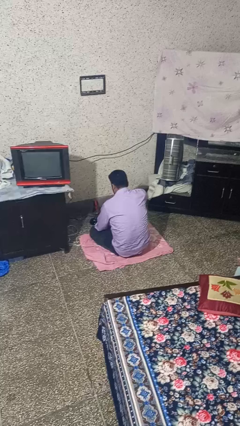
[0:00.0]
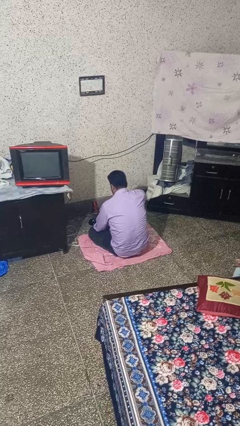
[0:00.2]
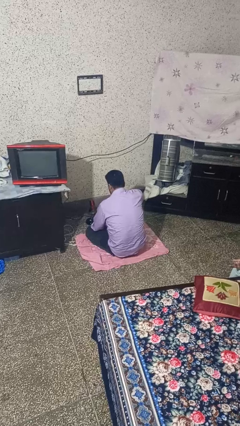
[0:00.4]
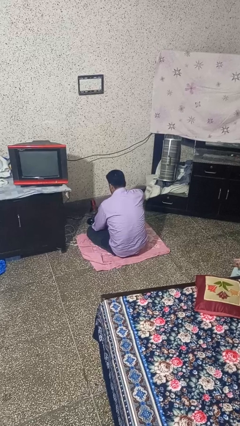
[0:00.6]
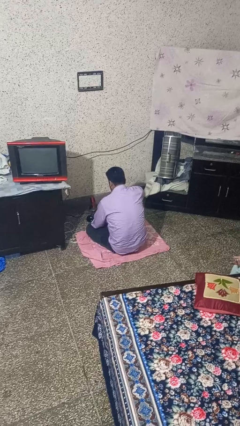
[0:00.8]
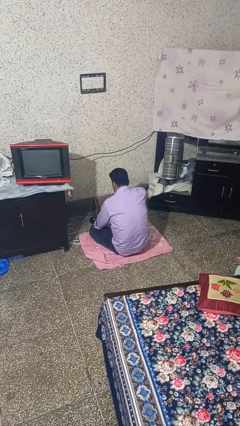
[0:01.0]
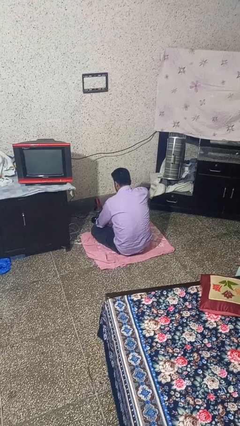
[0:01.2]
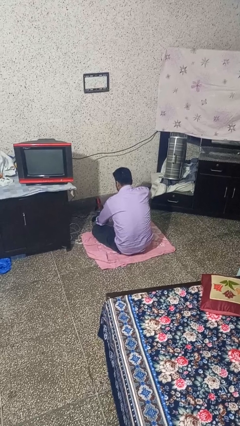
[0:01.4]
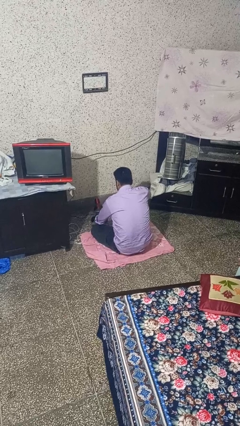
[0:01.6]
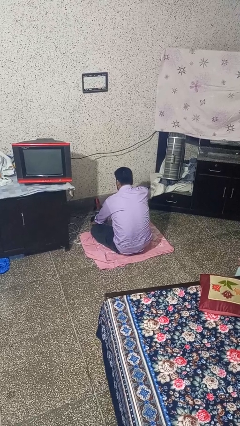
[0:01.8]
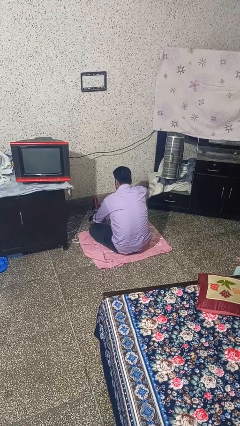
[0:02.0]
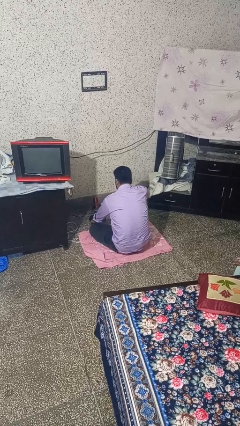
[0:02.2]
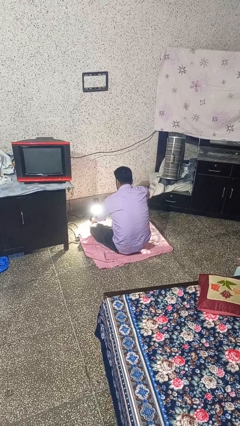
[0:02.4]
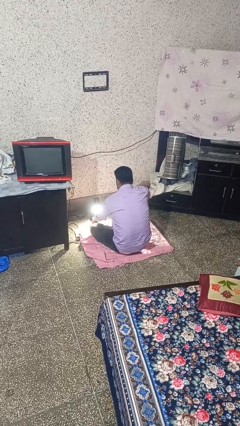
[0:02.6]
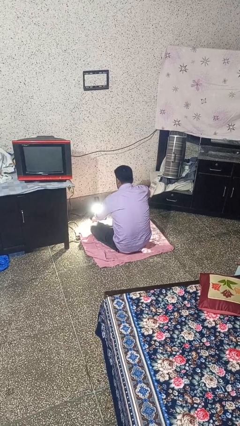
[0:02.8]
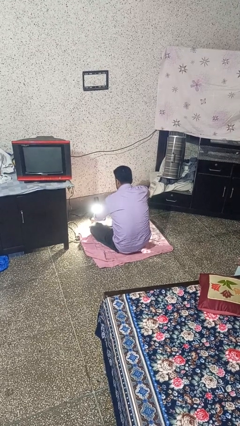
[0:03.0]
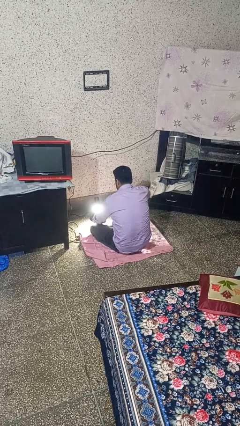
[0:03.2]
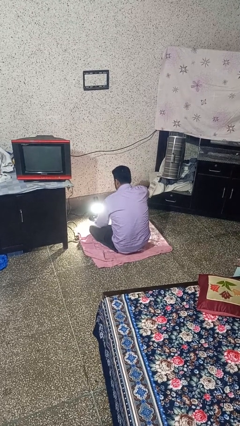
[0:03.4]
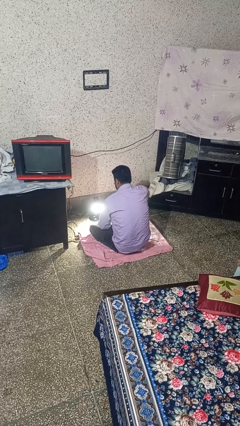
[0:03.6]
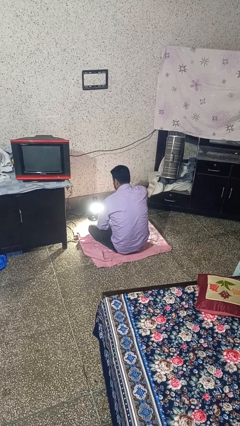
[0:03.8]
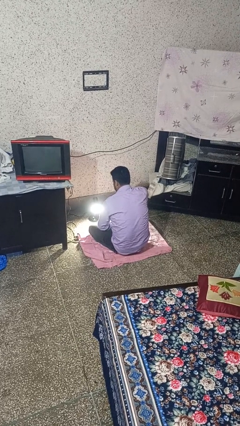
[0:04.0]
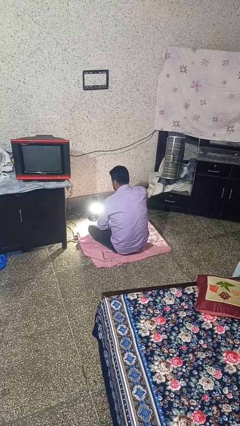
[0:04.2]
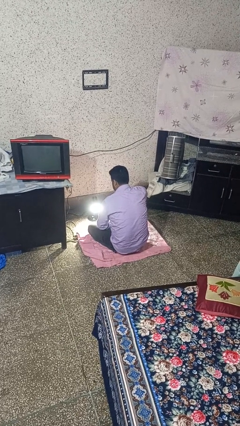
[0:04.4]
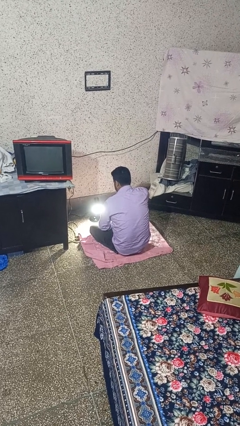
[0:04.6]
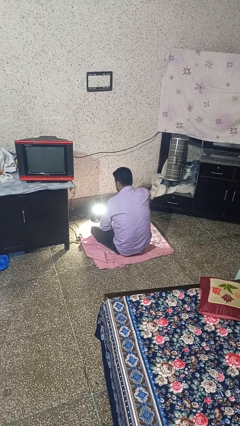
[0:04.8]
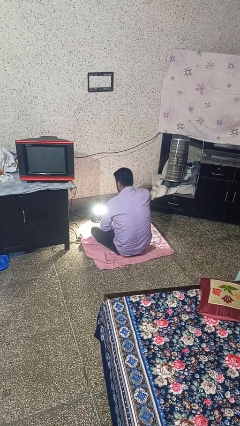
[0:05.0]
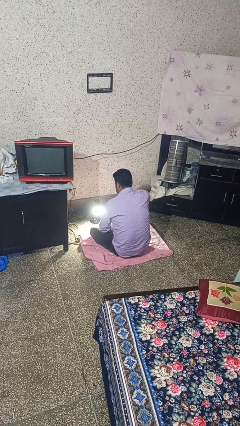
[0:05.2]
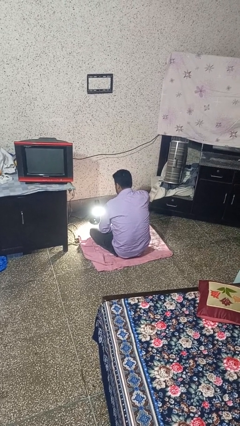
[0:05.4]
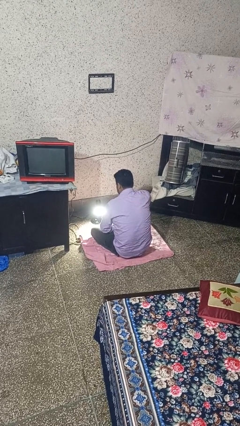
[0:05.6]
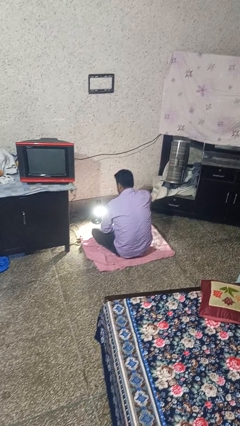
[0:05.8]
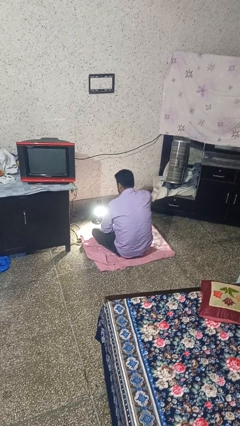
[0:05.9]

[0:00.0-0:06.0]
person turns on fan

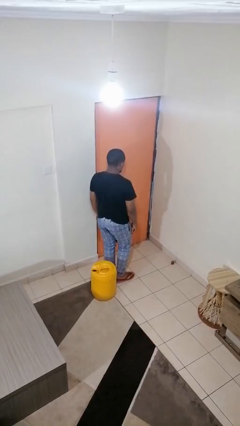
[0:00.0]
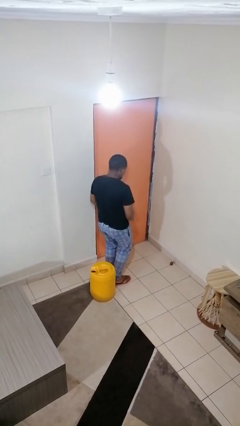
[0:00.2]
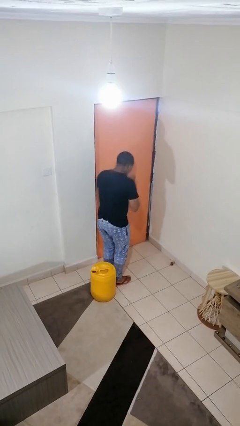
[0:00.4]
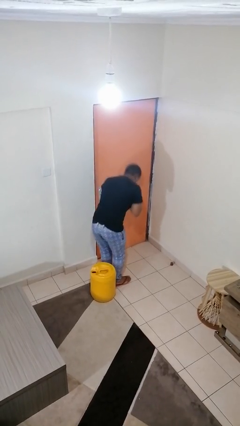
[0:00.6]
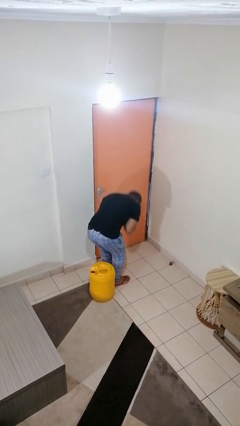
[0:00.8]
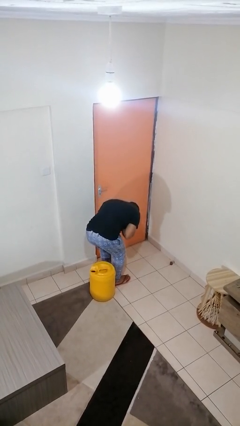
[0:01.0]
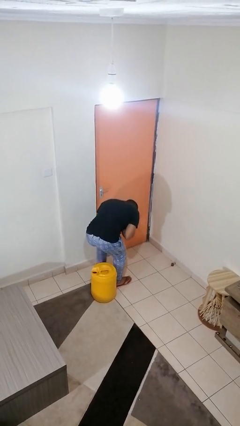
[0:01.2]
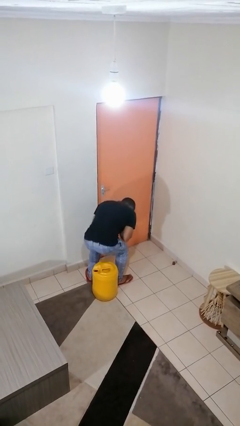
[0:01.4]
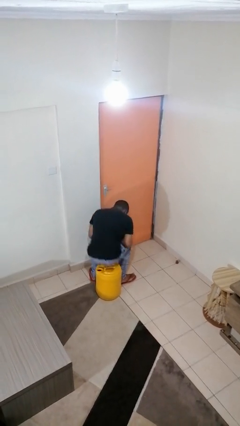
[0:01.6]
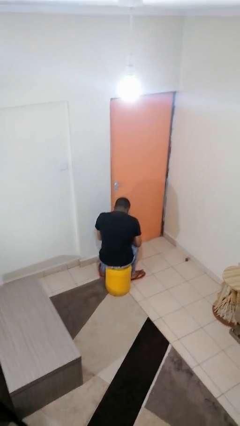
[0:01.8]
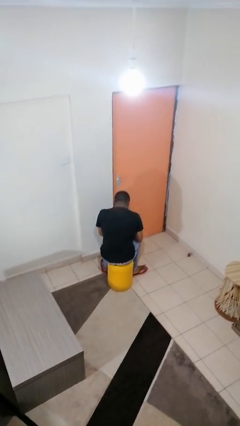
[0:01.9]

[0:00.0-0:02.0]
person sneezes into hand

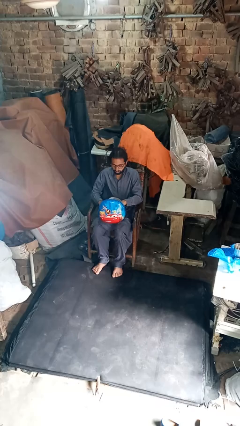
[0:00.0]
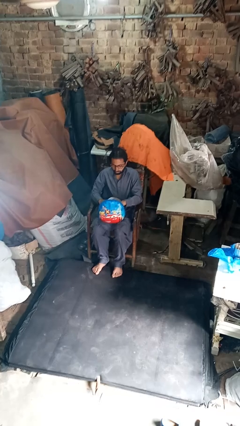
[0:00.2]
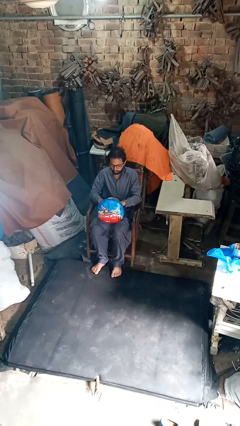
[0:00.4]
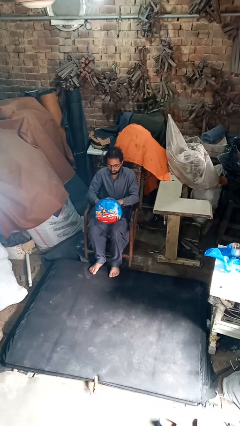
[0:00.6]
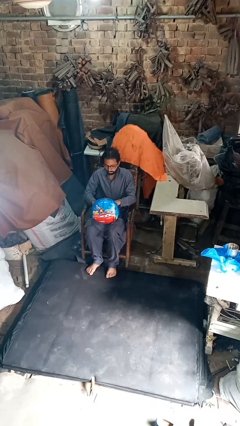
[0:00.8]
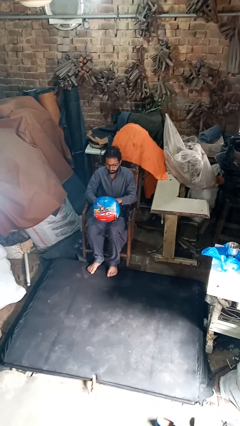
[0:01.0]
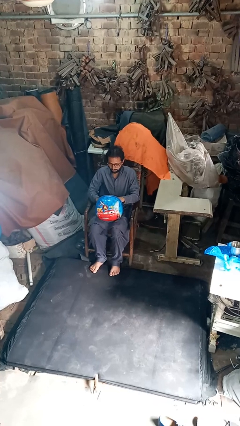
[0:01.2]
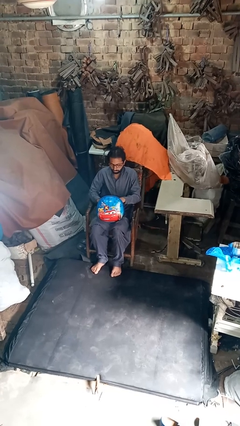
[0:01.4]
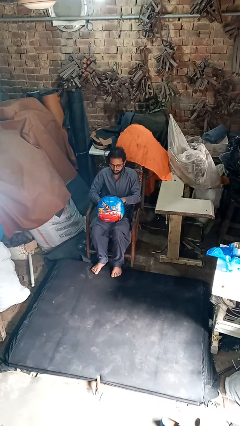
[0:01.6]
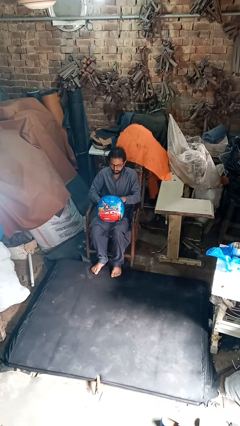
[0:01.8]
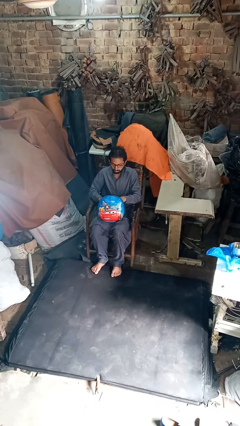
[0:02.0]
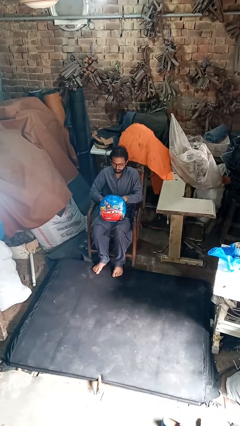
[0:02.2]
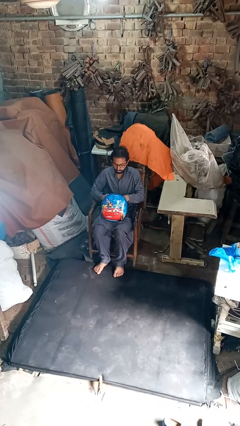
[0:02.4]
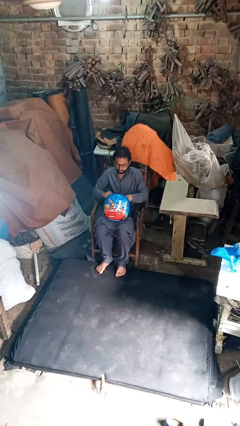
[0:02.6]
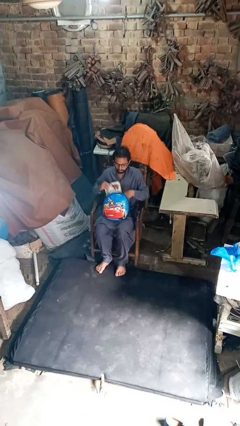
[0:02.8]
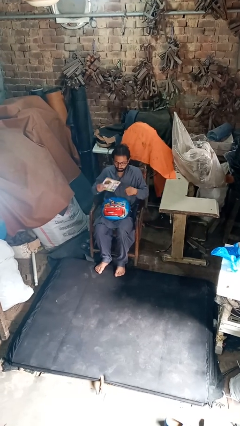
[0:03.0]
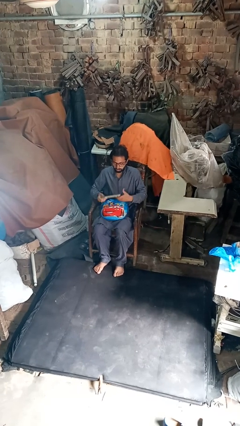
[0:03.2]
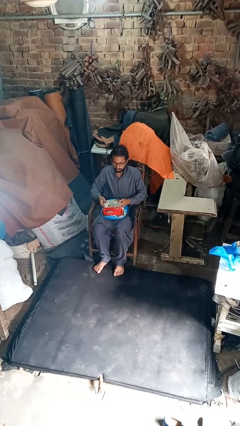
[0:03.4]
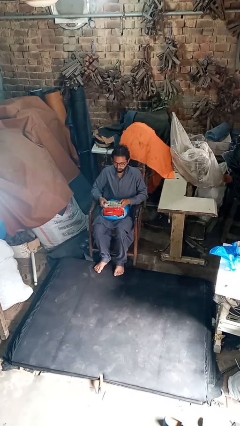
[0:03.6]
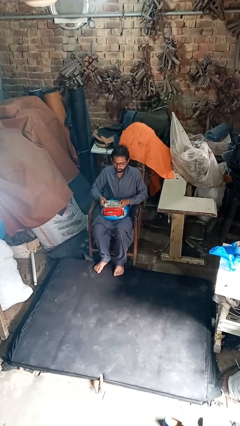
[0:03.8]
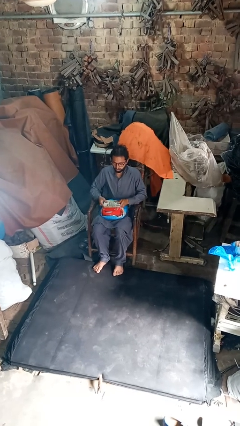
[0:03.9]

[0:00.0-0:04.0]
person takes object from purse

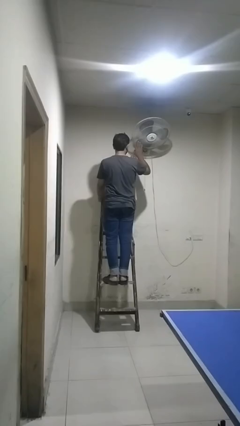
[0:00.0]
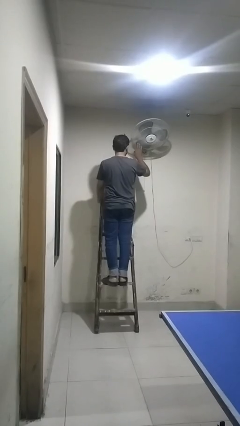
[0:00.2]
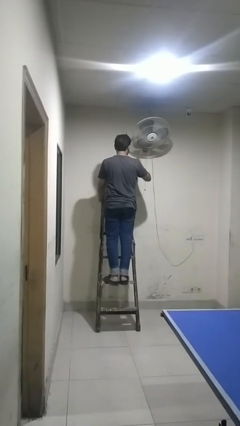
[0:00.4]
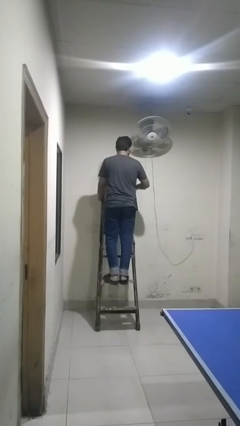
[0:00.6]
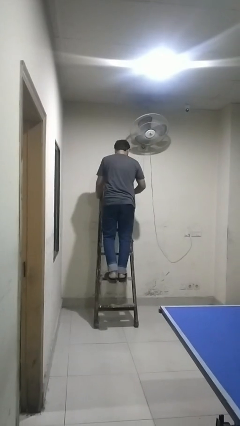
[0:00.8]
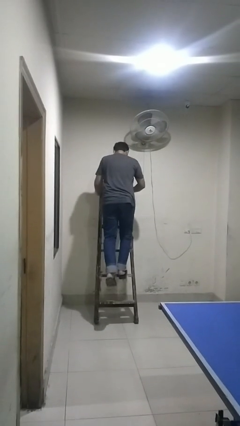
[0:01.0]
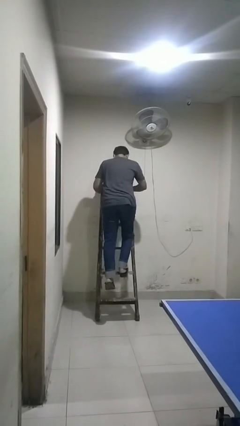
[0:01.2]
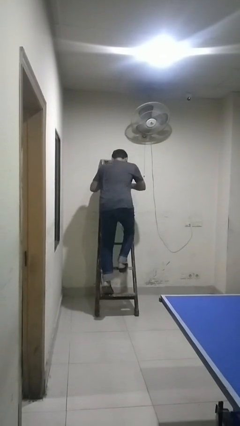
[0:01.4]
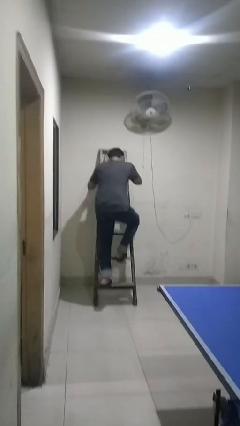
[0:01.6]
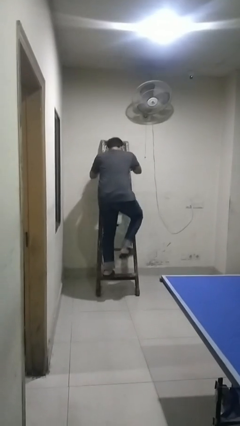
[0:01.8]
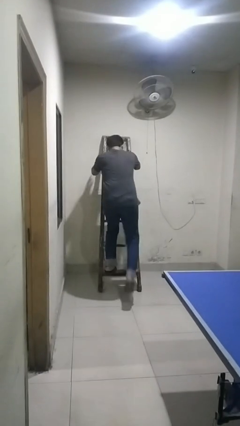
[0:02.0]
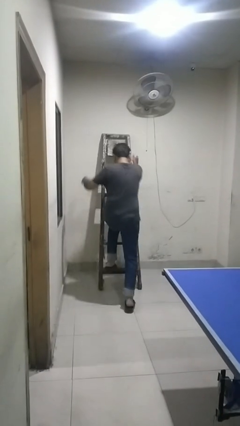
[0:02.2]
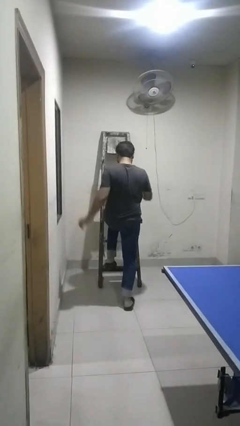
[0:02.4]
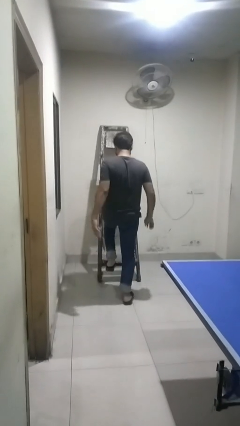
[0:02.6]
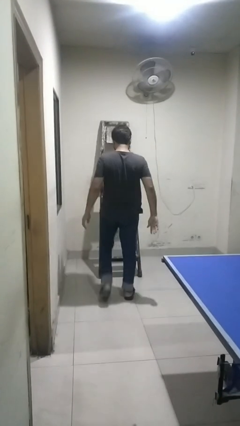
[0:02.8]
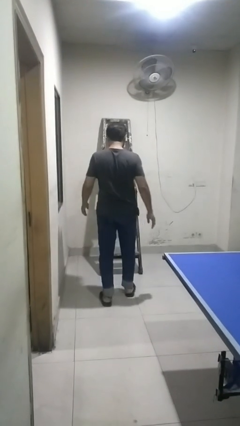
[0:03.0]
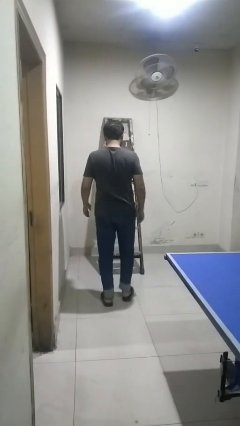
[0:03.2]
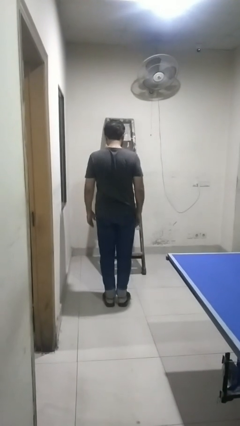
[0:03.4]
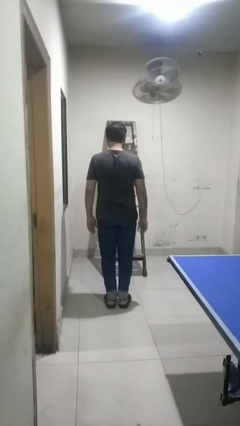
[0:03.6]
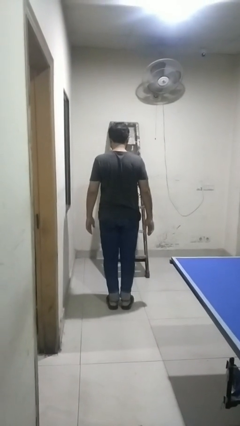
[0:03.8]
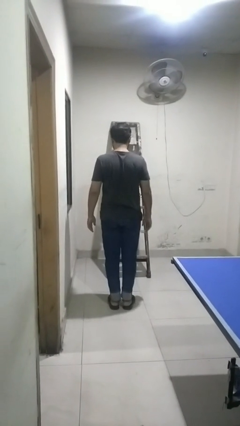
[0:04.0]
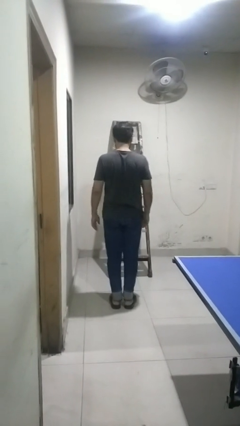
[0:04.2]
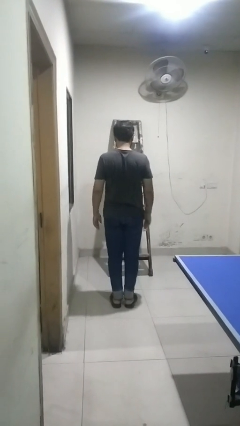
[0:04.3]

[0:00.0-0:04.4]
person climbs down ladder

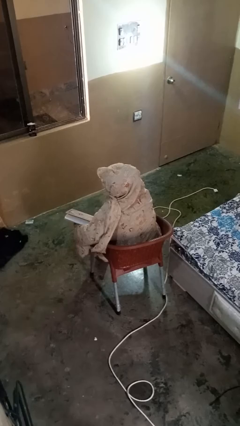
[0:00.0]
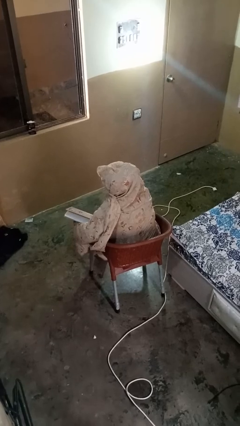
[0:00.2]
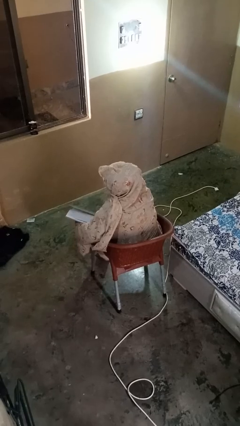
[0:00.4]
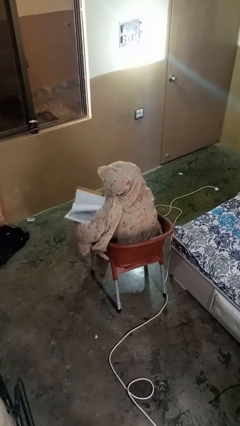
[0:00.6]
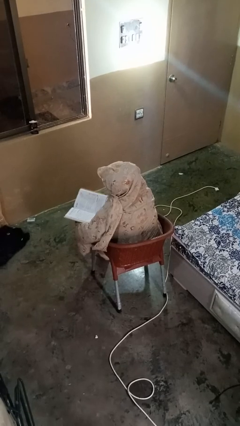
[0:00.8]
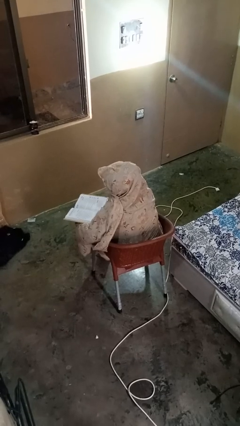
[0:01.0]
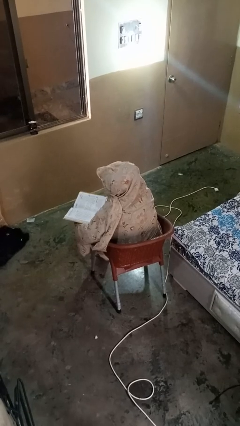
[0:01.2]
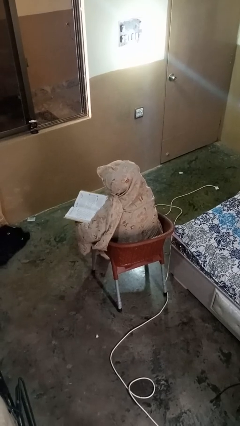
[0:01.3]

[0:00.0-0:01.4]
person reads book

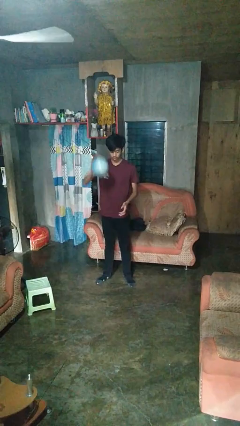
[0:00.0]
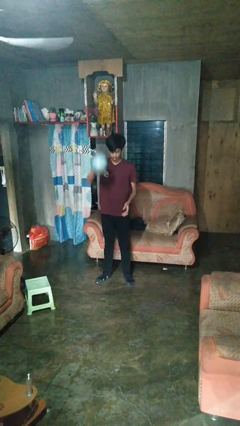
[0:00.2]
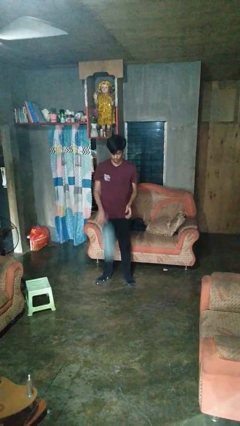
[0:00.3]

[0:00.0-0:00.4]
person bounces ball on floor
